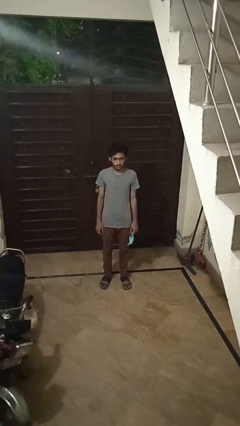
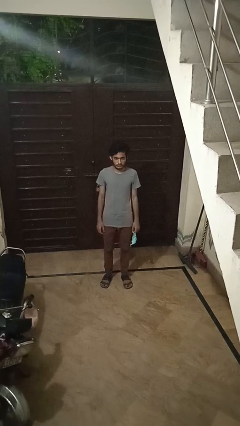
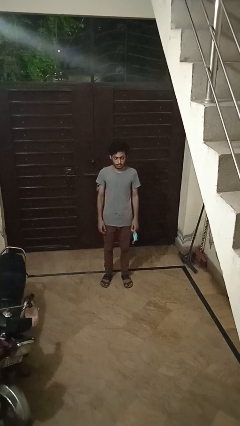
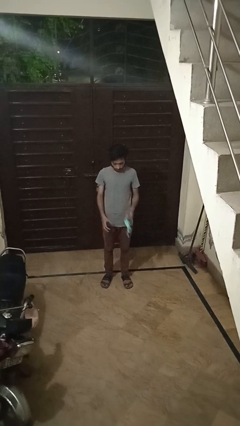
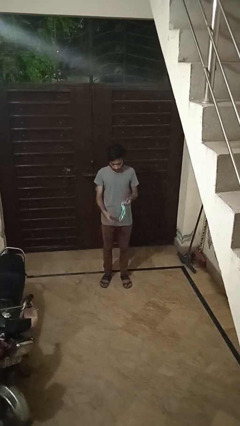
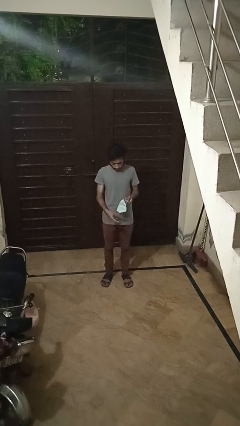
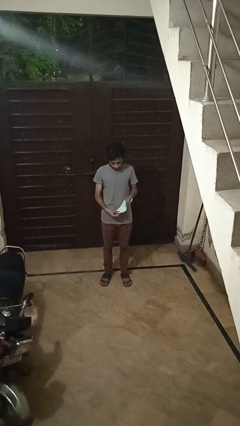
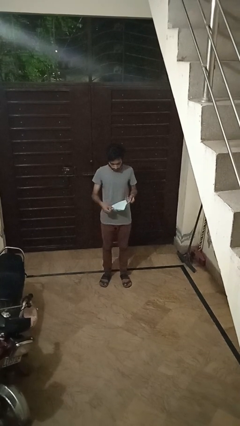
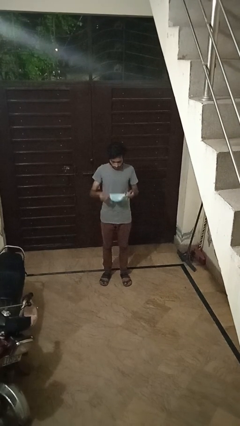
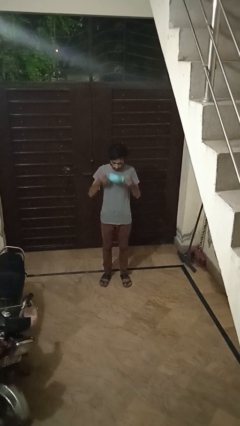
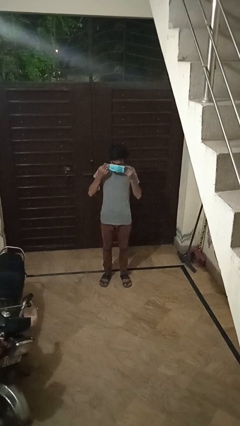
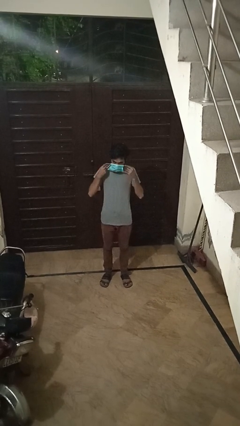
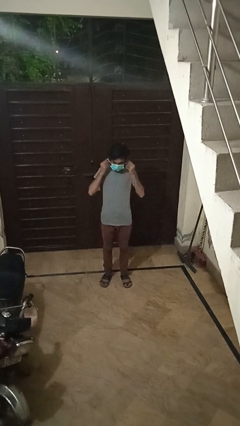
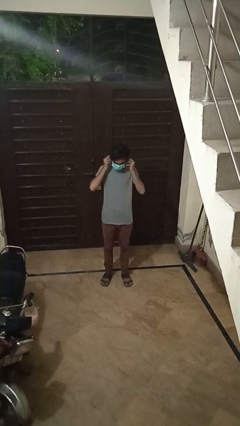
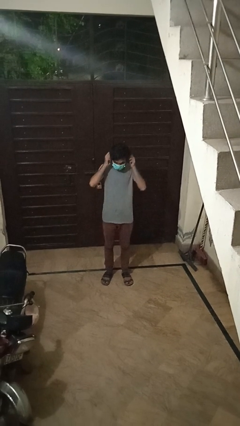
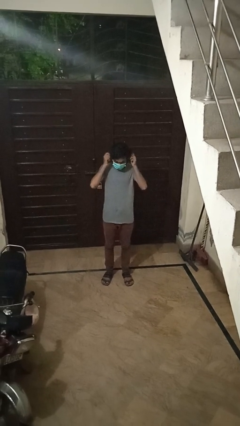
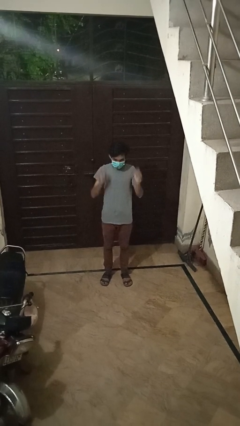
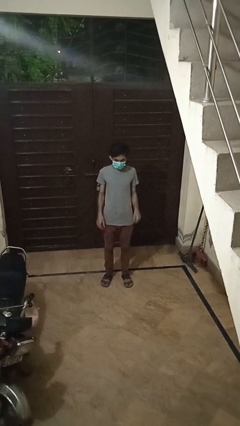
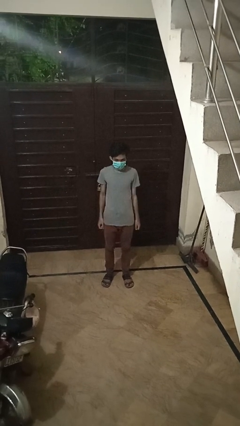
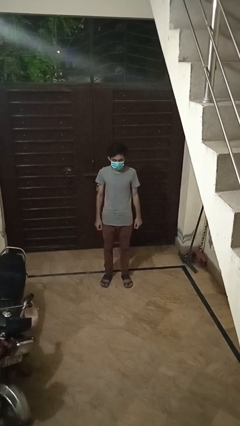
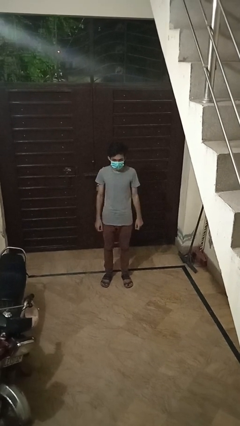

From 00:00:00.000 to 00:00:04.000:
person puts on facemask

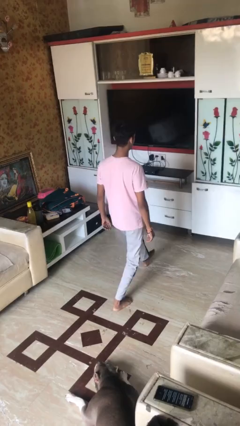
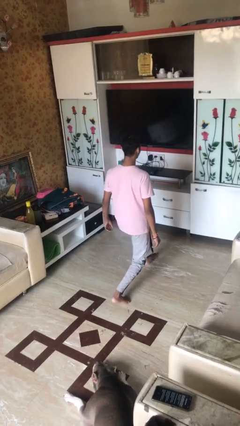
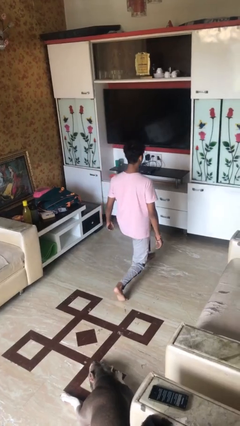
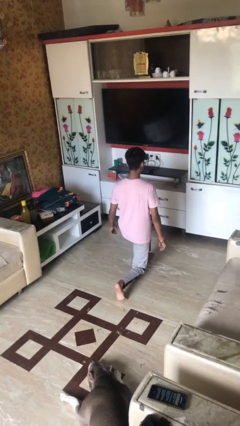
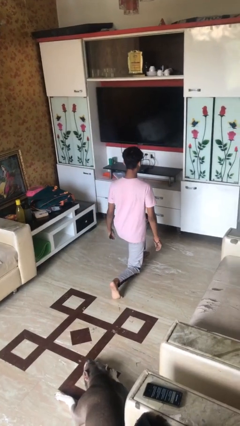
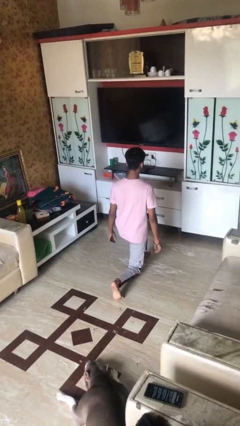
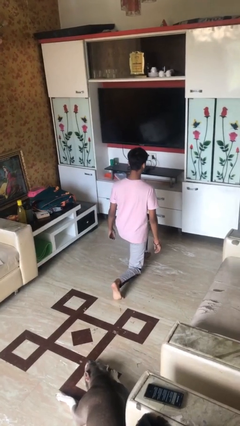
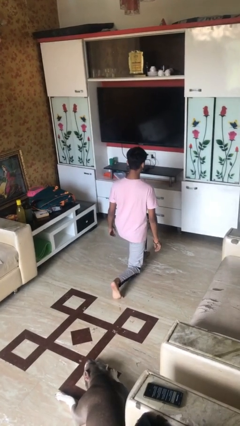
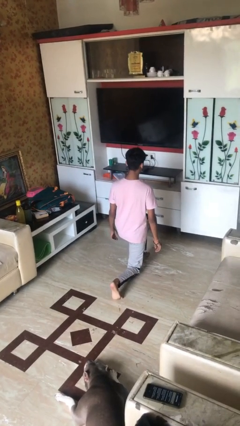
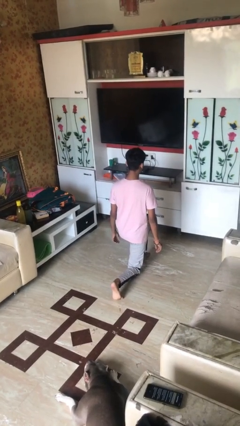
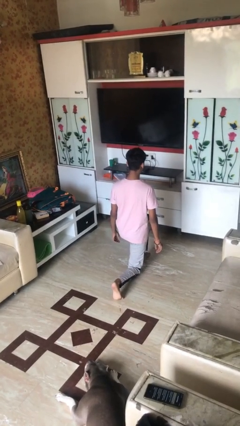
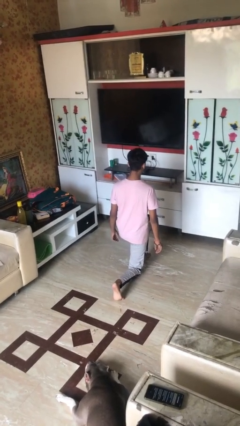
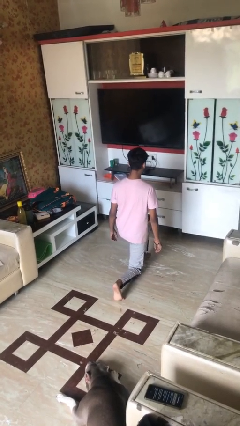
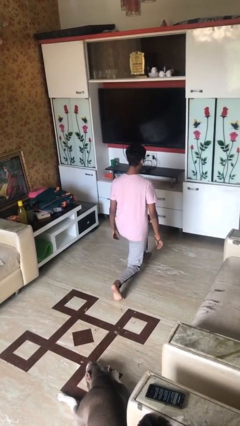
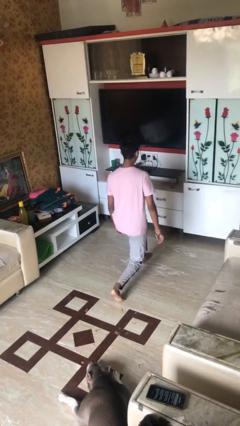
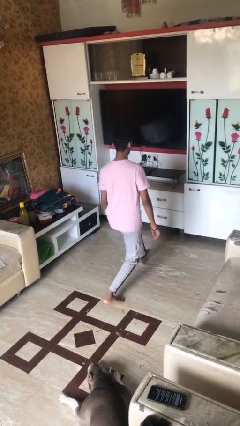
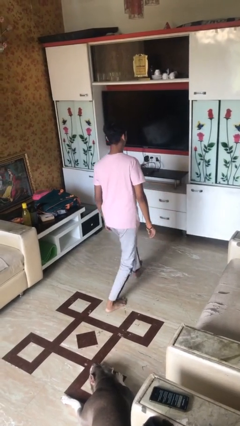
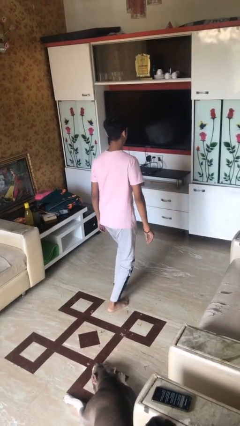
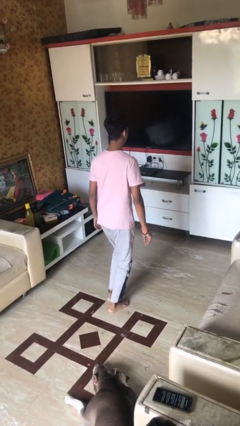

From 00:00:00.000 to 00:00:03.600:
person exercises with lunges

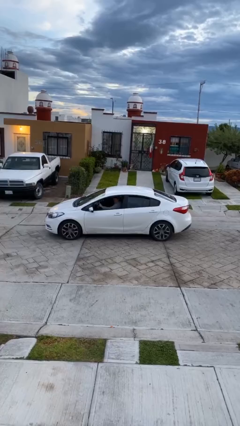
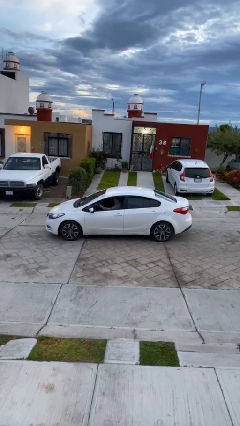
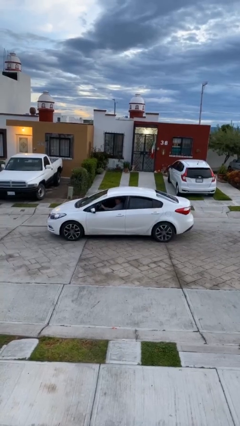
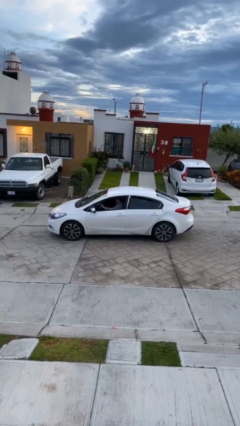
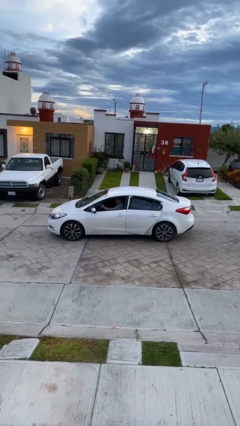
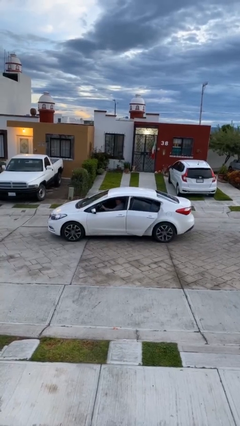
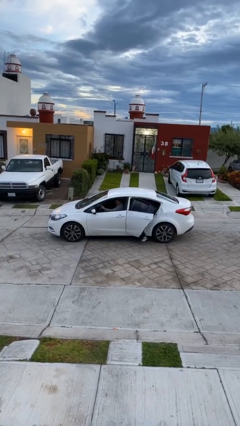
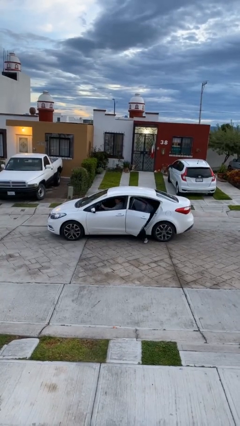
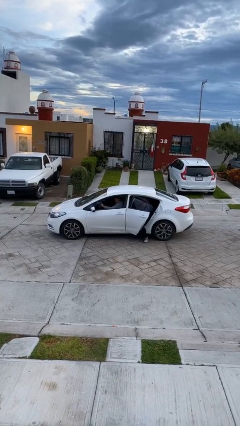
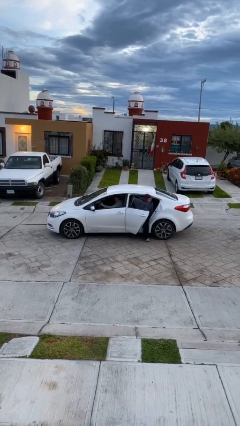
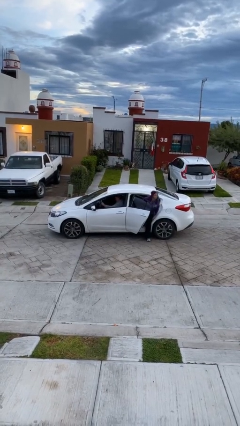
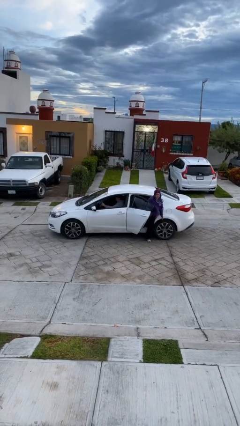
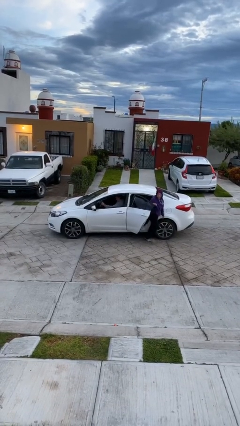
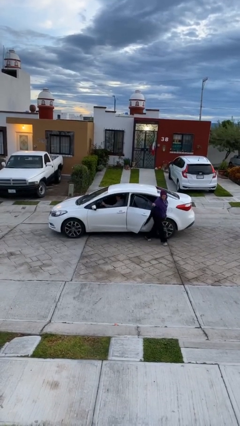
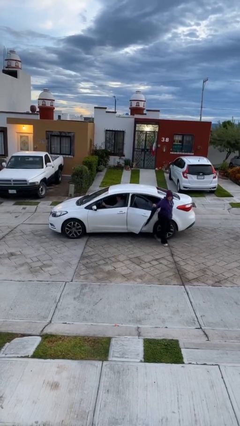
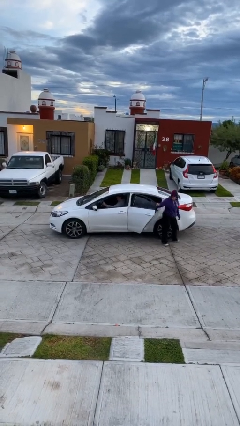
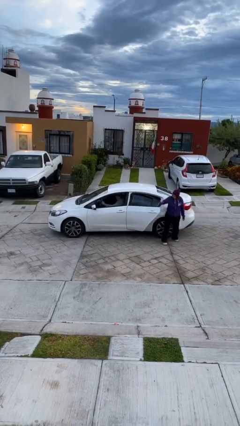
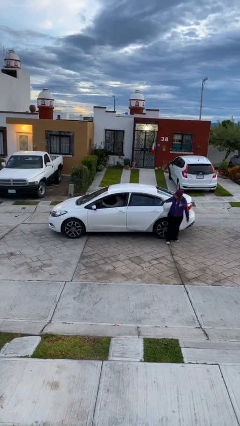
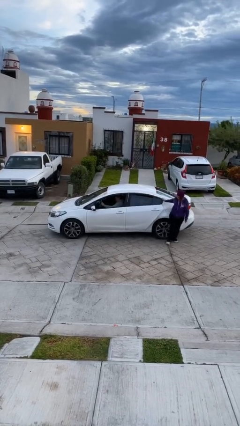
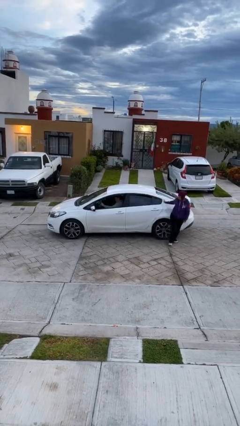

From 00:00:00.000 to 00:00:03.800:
car drops off person

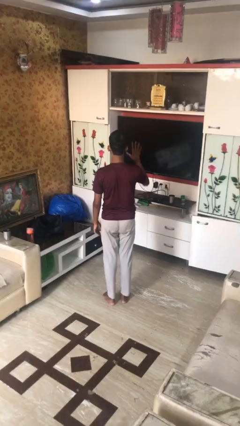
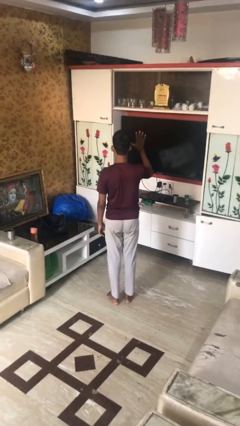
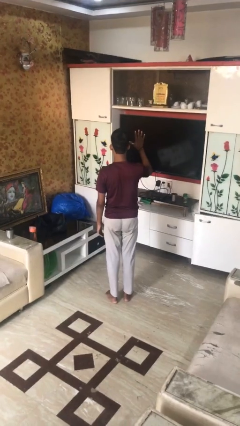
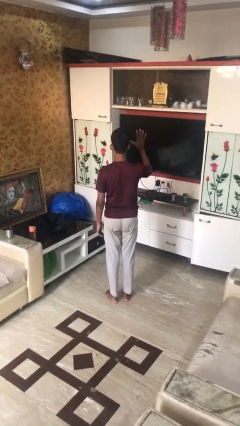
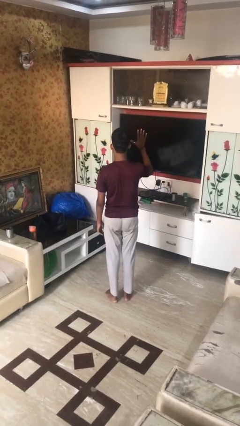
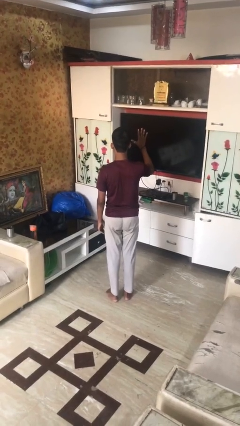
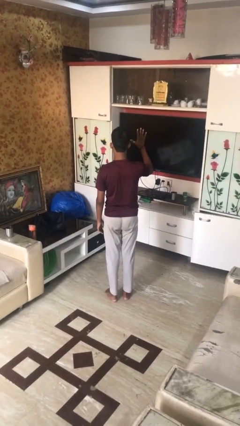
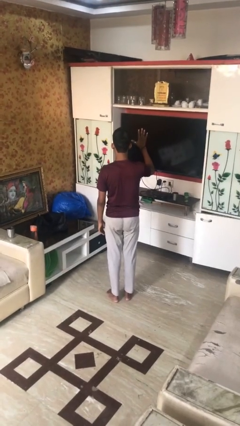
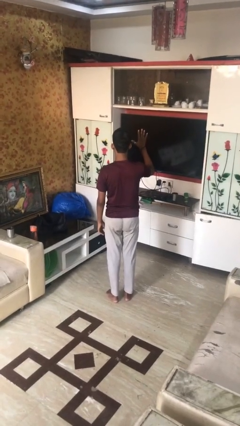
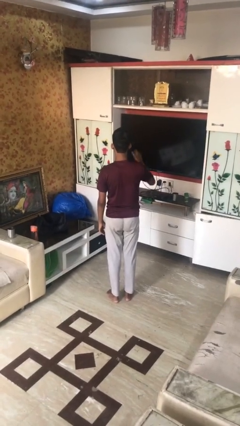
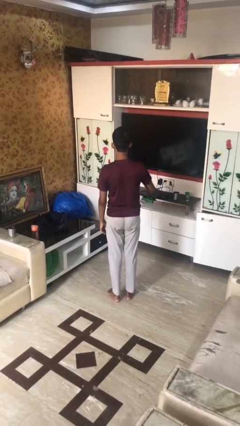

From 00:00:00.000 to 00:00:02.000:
person gestures number five

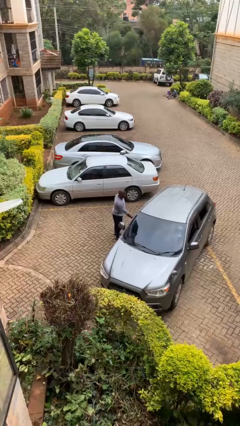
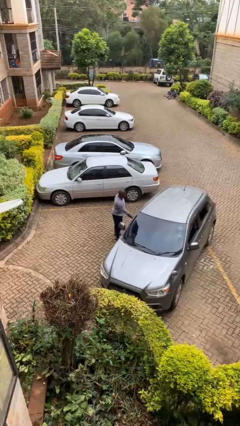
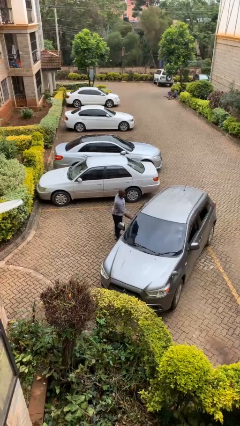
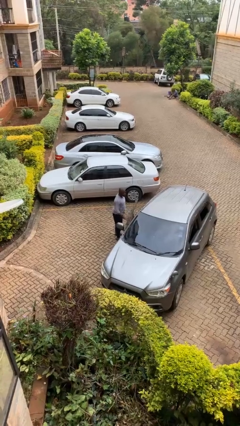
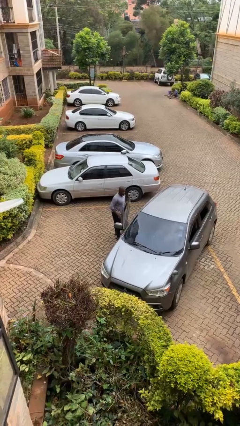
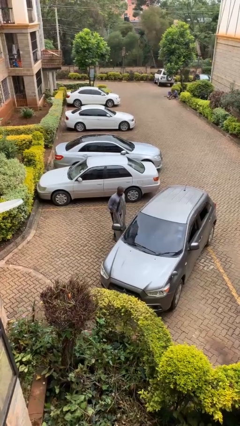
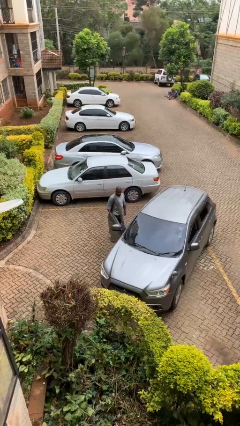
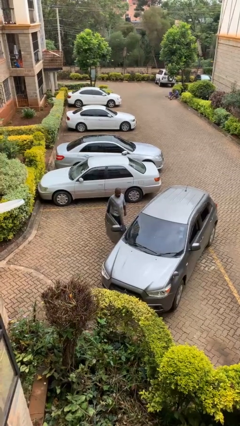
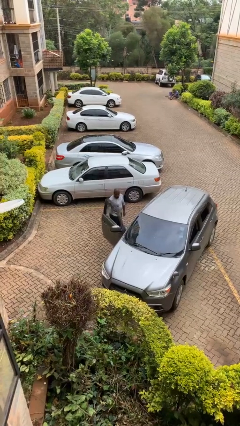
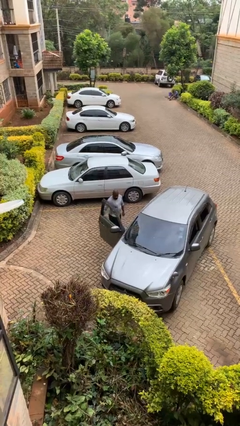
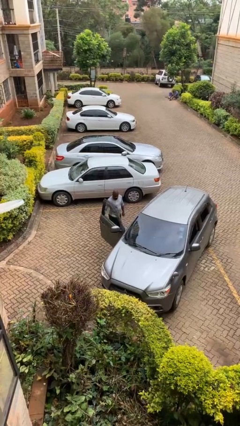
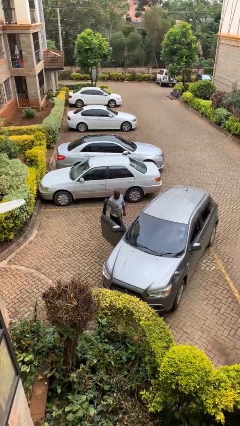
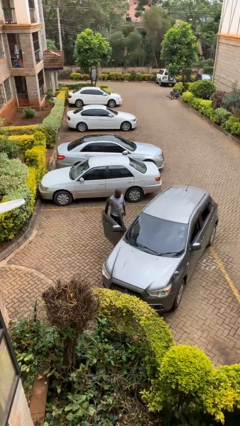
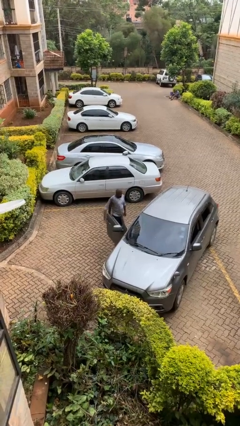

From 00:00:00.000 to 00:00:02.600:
person opens car door

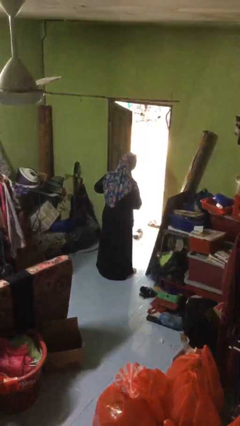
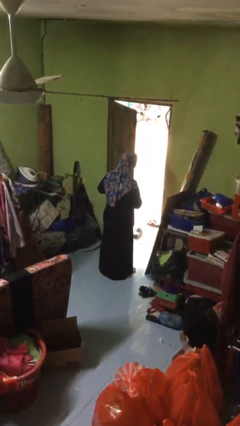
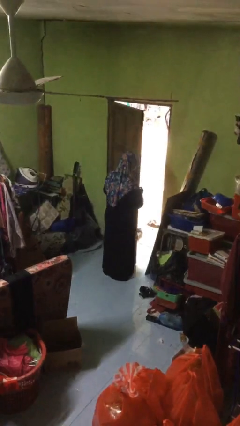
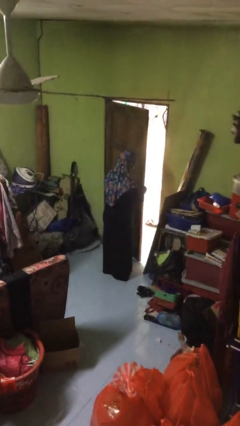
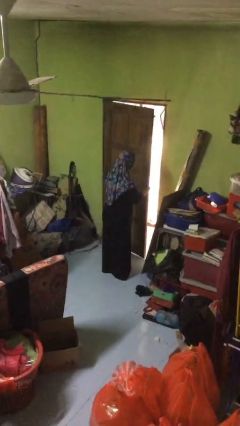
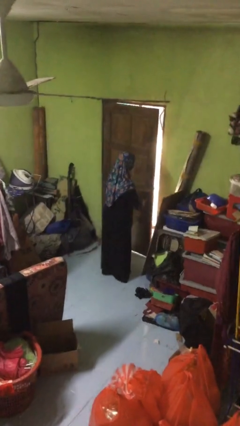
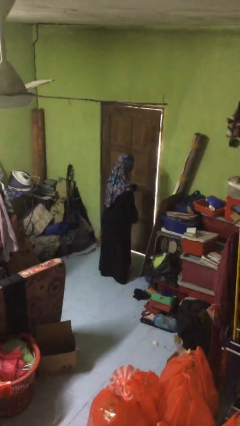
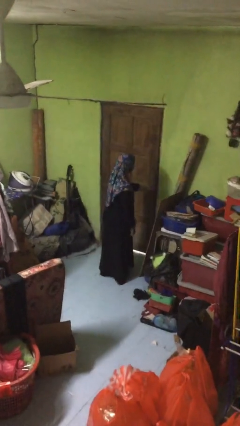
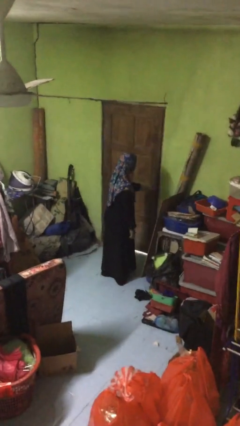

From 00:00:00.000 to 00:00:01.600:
person closes facility door
